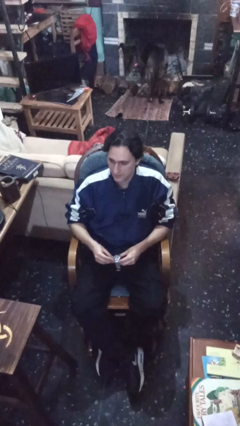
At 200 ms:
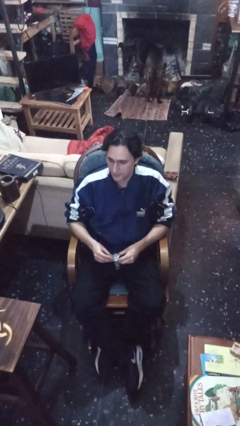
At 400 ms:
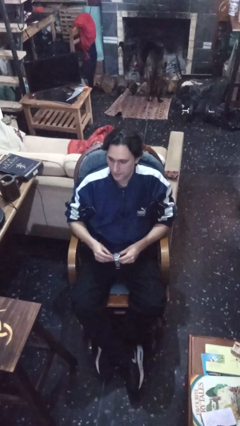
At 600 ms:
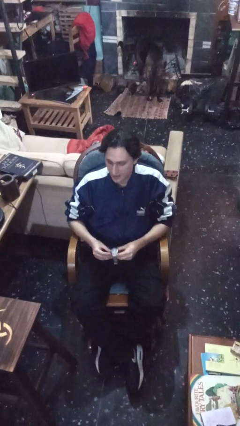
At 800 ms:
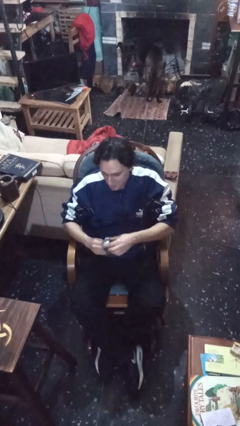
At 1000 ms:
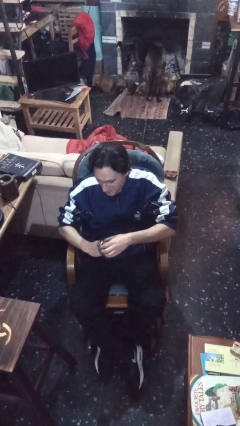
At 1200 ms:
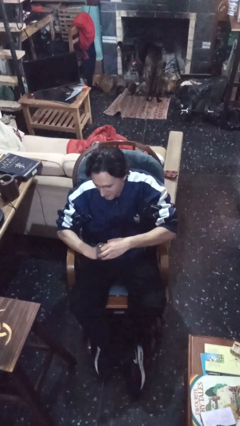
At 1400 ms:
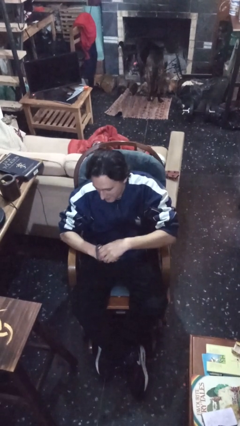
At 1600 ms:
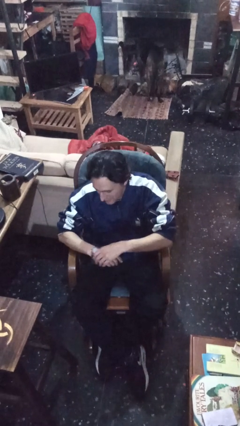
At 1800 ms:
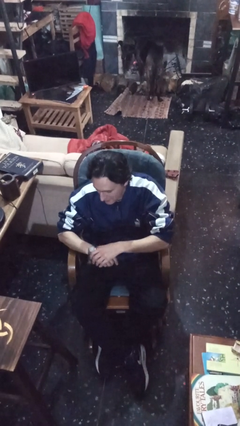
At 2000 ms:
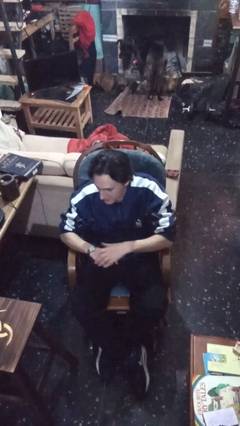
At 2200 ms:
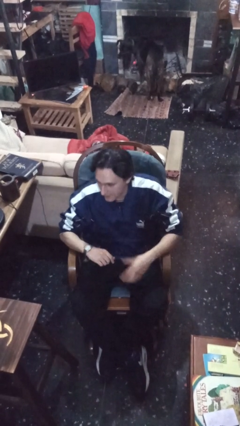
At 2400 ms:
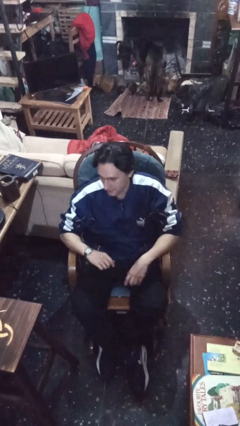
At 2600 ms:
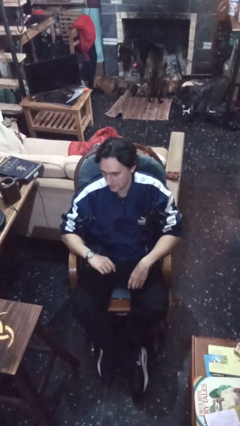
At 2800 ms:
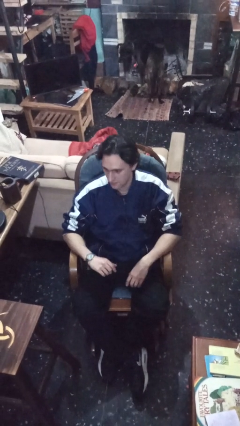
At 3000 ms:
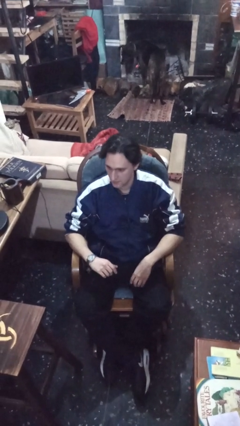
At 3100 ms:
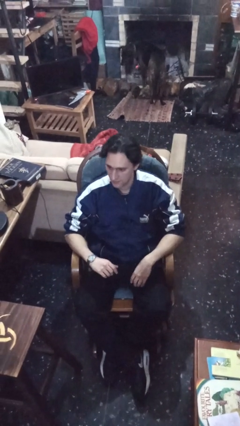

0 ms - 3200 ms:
person puts on wristwatch

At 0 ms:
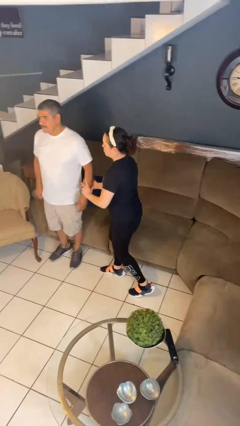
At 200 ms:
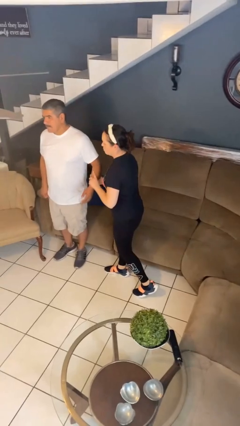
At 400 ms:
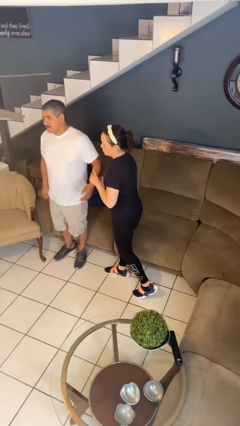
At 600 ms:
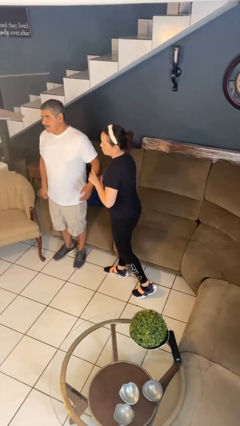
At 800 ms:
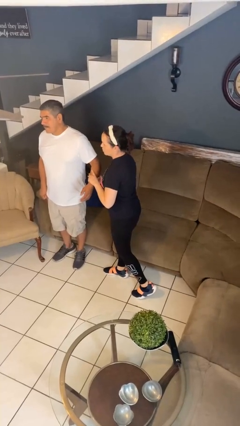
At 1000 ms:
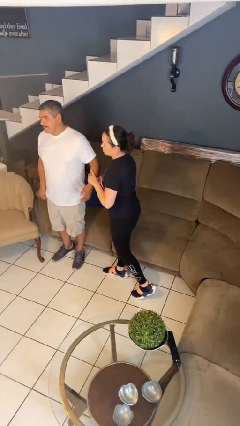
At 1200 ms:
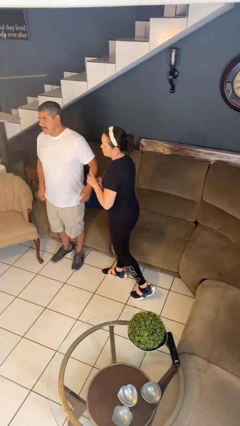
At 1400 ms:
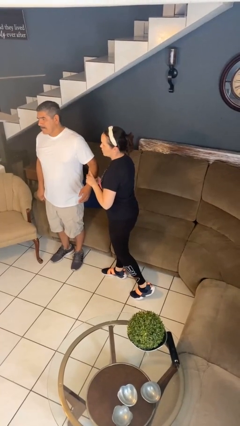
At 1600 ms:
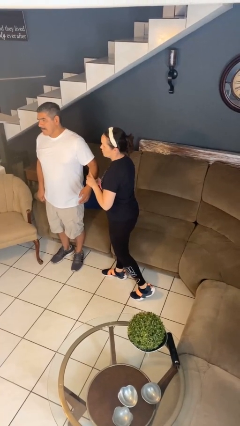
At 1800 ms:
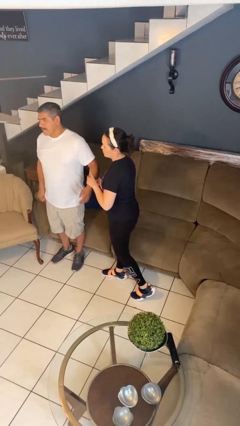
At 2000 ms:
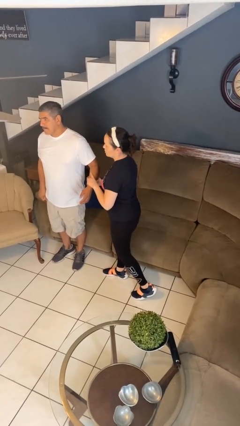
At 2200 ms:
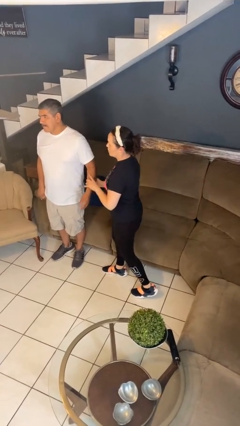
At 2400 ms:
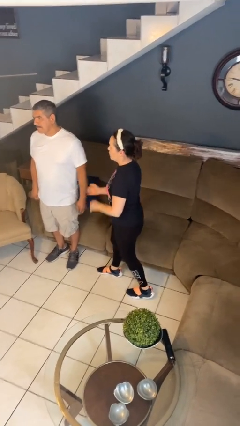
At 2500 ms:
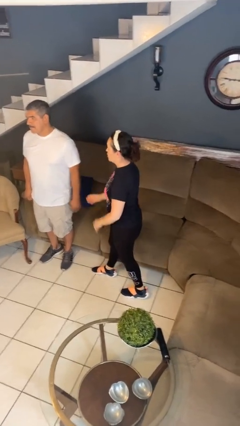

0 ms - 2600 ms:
person grabs person by forearm

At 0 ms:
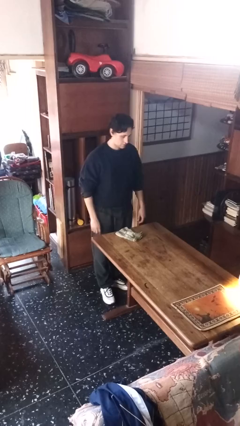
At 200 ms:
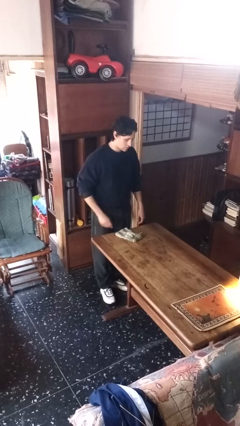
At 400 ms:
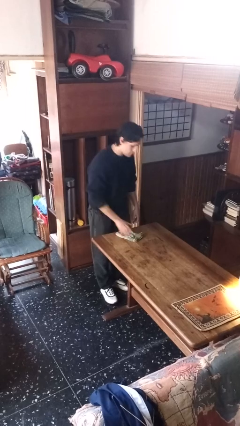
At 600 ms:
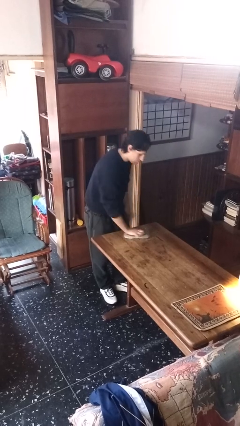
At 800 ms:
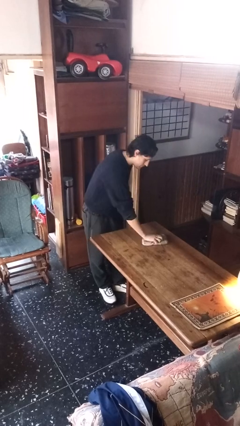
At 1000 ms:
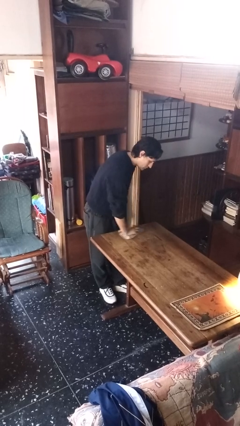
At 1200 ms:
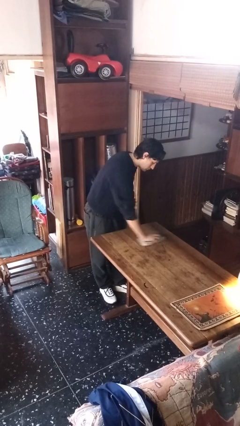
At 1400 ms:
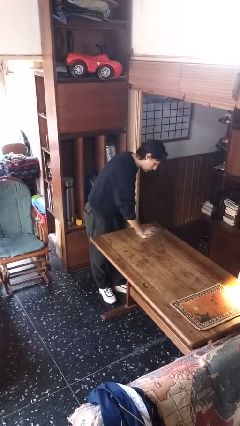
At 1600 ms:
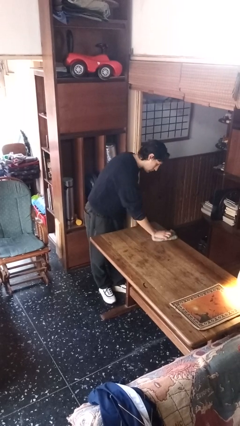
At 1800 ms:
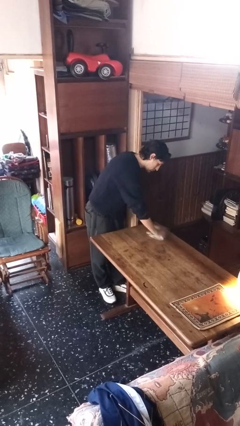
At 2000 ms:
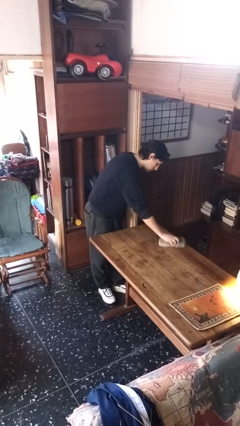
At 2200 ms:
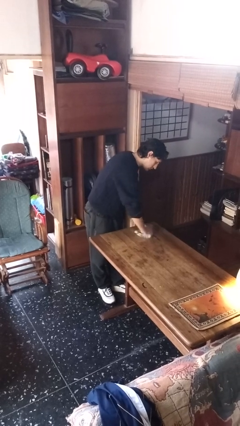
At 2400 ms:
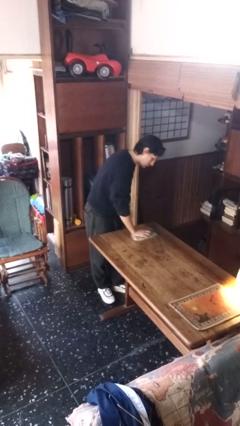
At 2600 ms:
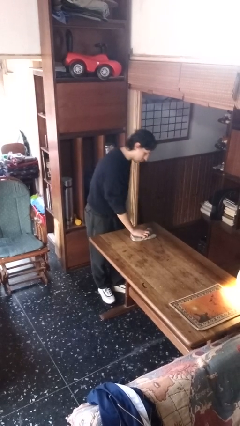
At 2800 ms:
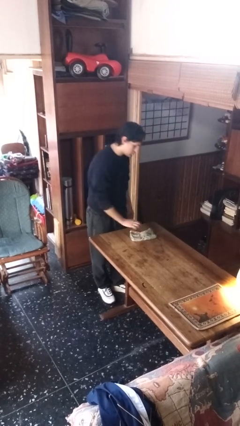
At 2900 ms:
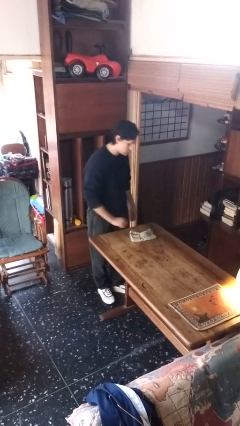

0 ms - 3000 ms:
person cleans table with rag

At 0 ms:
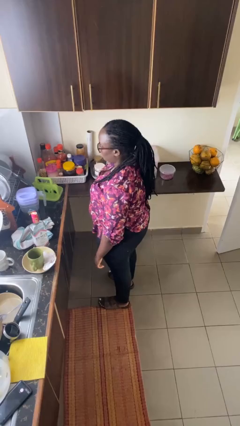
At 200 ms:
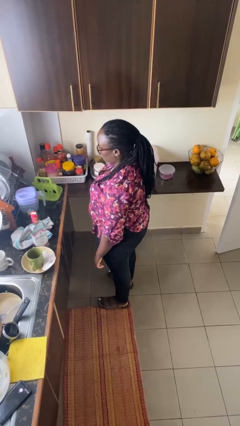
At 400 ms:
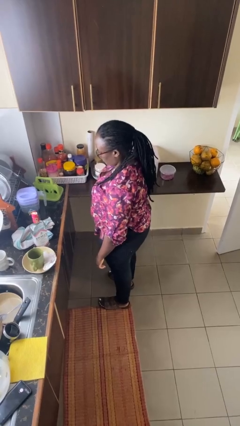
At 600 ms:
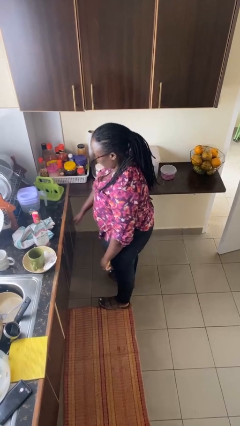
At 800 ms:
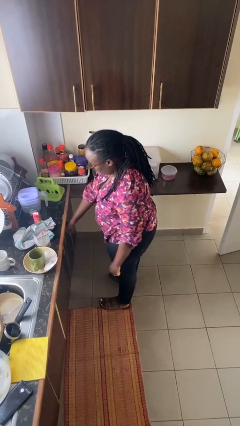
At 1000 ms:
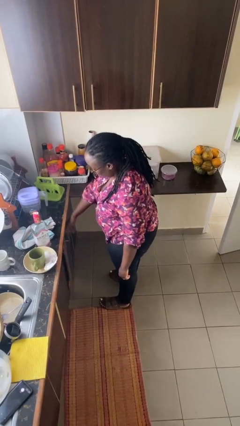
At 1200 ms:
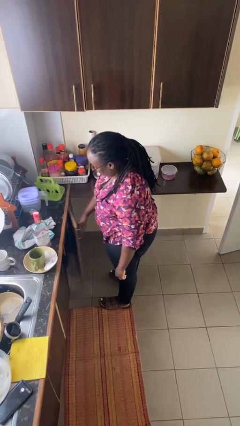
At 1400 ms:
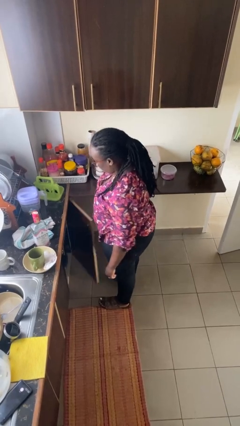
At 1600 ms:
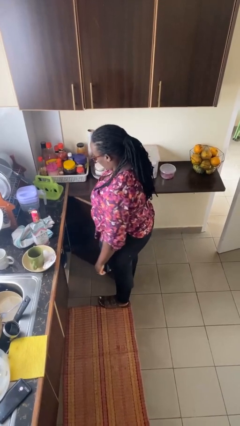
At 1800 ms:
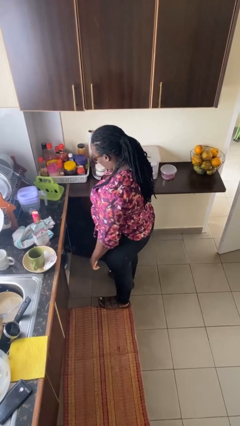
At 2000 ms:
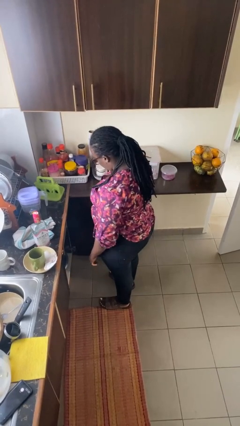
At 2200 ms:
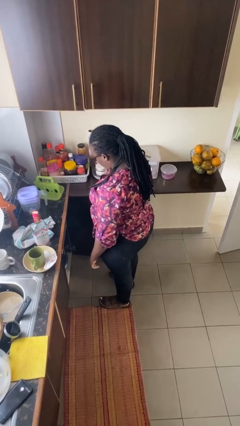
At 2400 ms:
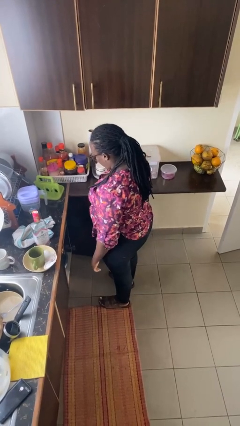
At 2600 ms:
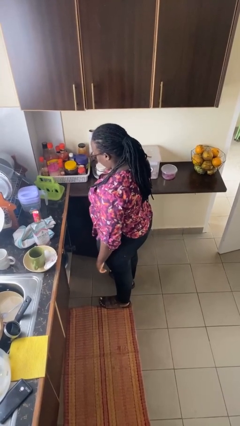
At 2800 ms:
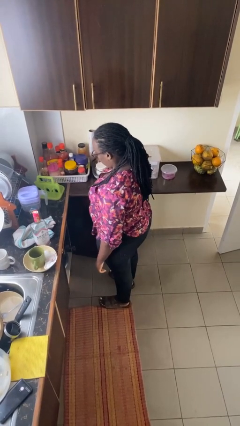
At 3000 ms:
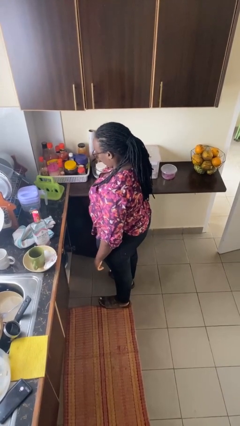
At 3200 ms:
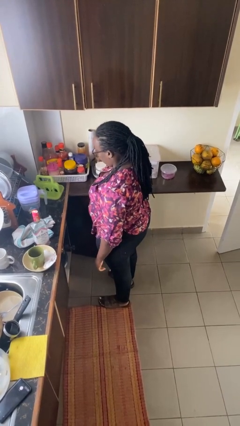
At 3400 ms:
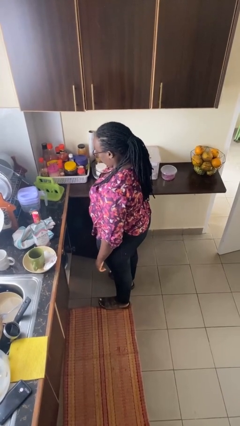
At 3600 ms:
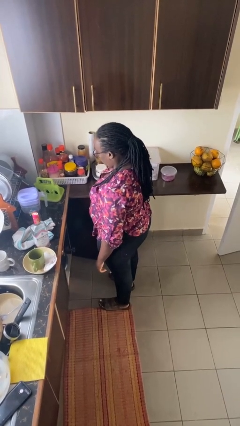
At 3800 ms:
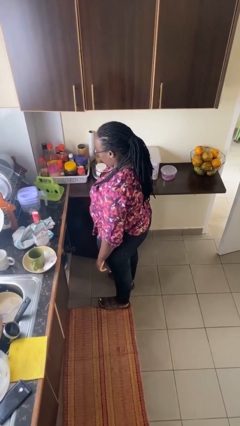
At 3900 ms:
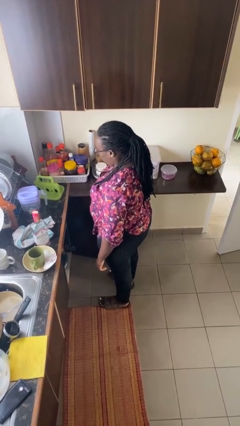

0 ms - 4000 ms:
person opens cabinet

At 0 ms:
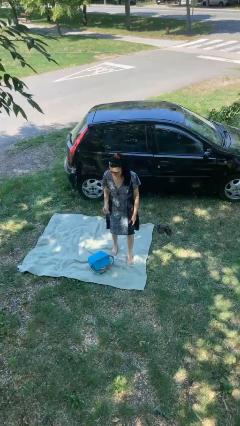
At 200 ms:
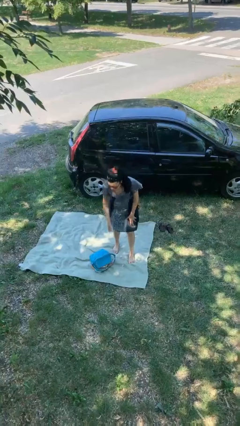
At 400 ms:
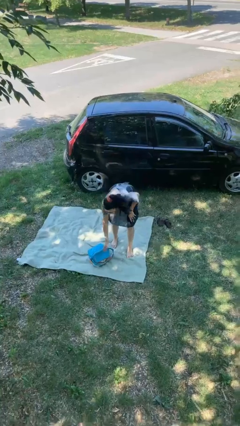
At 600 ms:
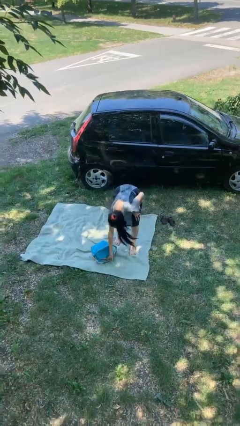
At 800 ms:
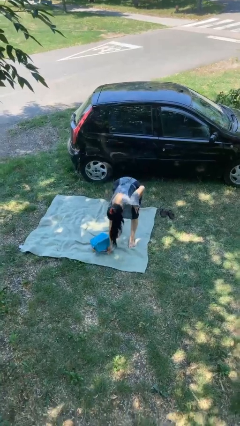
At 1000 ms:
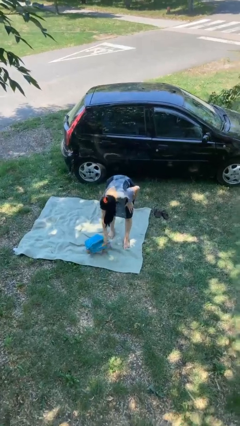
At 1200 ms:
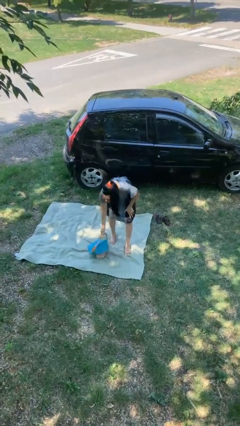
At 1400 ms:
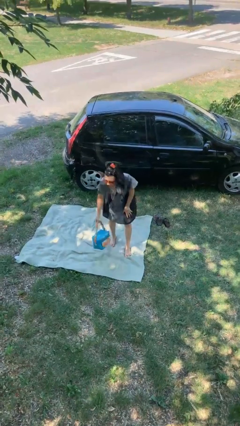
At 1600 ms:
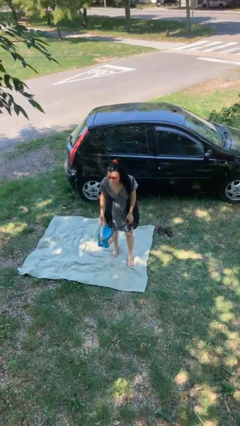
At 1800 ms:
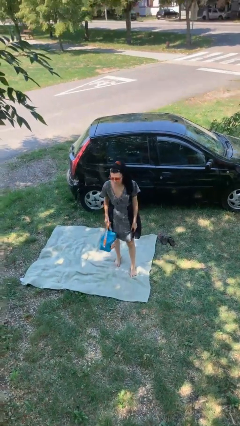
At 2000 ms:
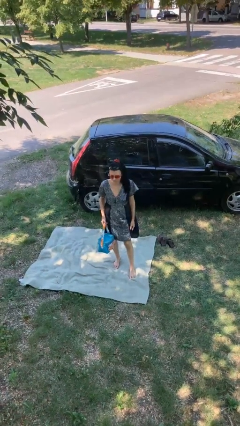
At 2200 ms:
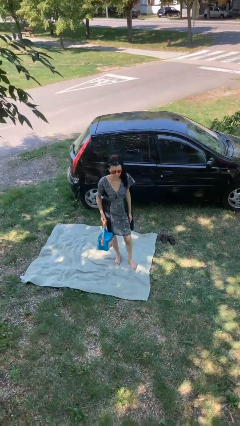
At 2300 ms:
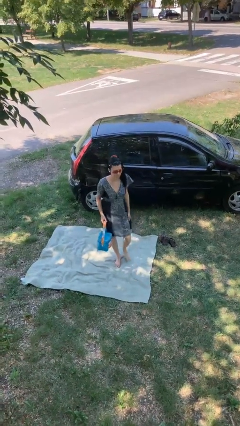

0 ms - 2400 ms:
person picks up object from floor

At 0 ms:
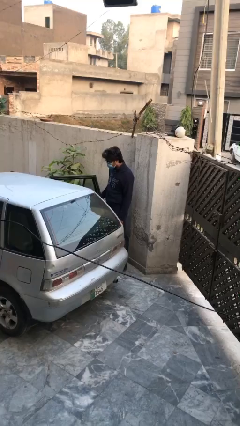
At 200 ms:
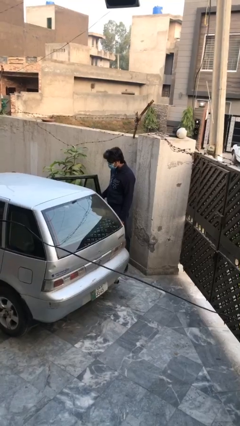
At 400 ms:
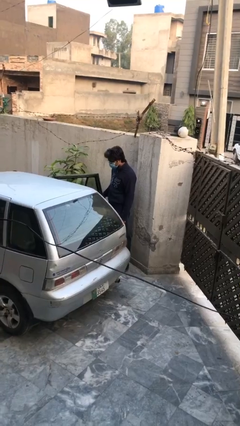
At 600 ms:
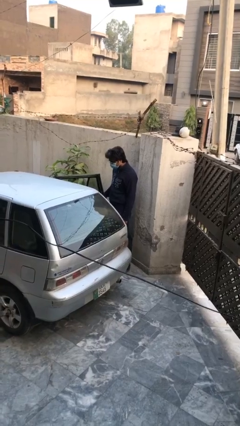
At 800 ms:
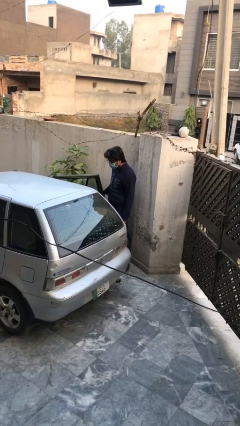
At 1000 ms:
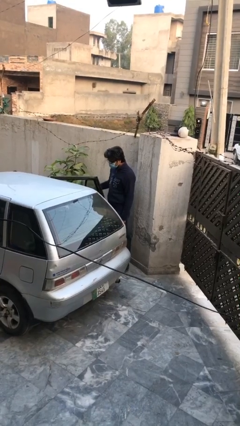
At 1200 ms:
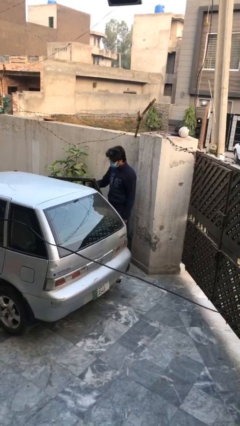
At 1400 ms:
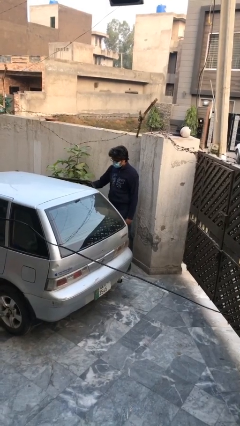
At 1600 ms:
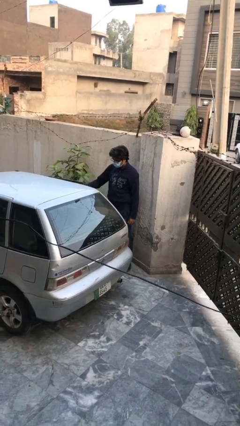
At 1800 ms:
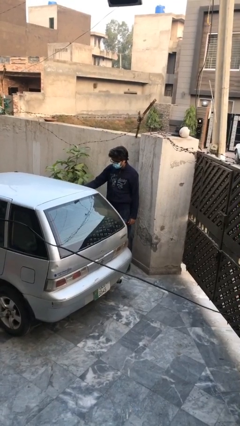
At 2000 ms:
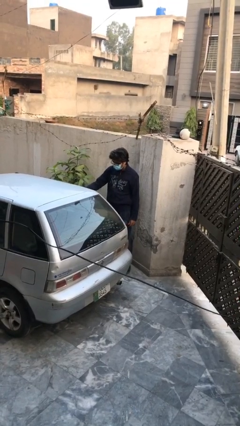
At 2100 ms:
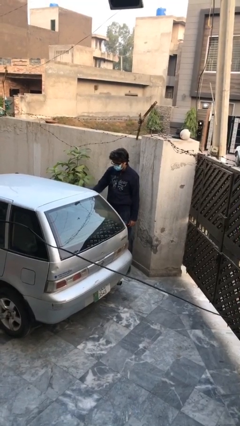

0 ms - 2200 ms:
person closes car door
